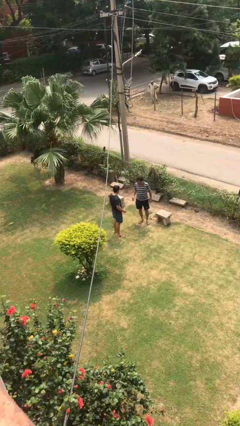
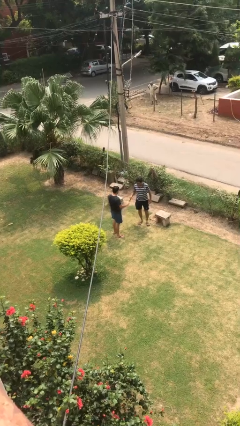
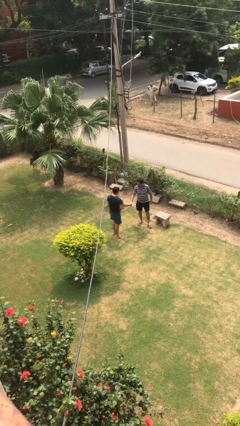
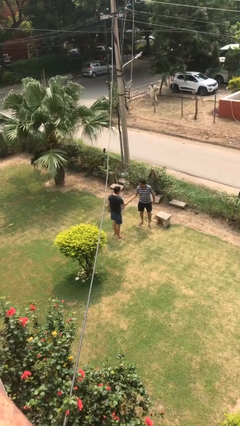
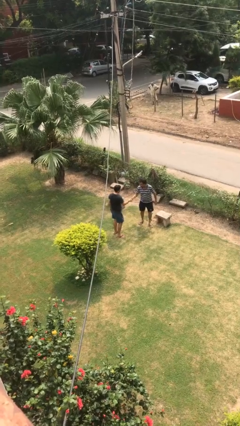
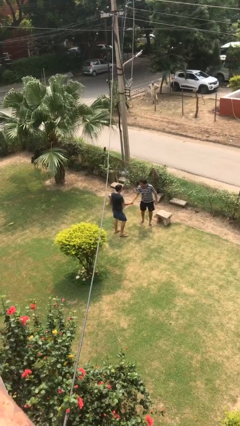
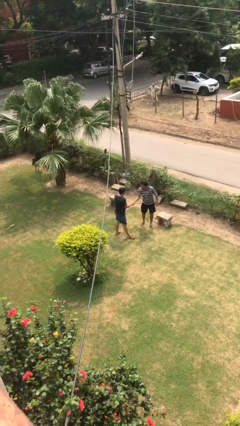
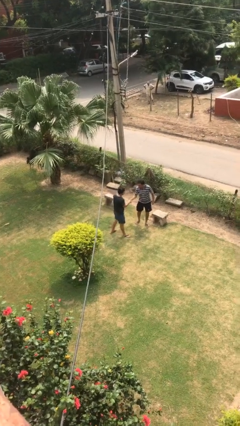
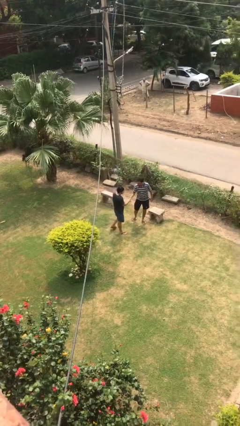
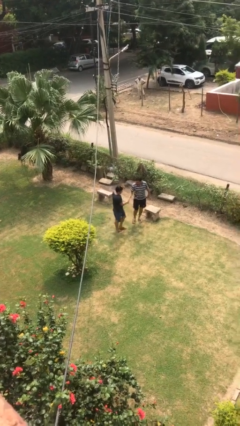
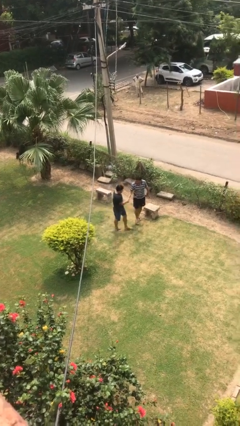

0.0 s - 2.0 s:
person shakes hand

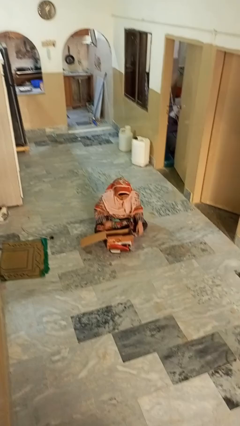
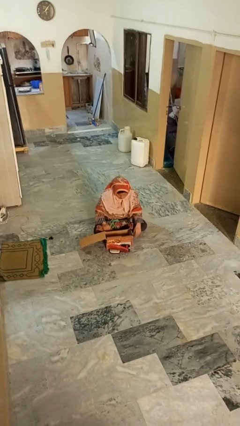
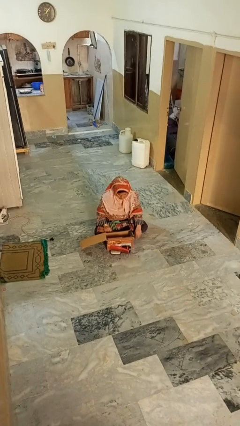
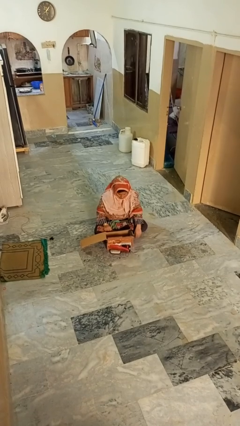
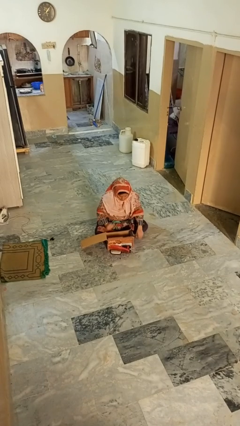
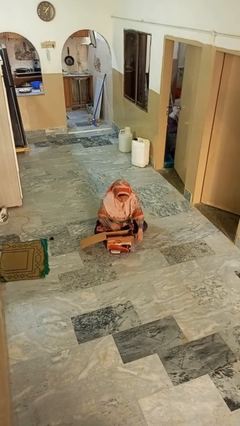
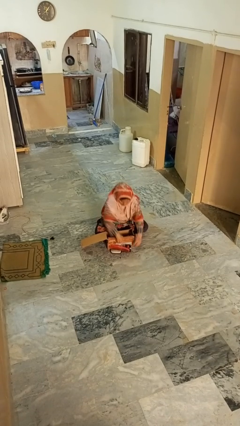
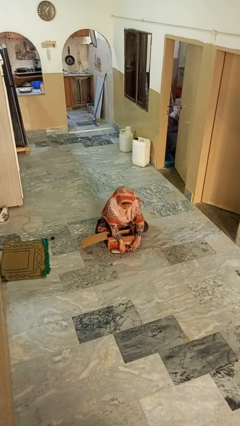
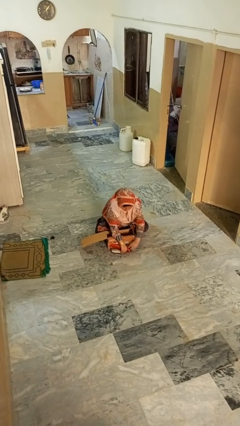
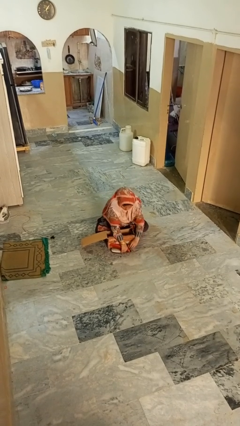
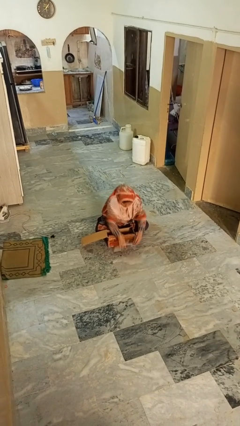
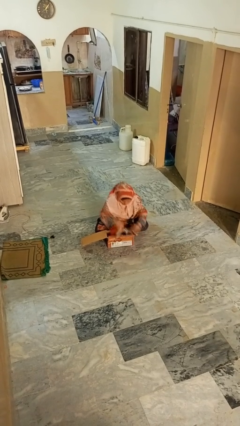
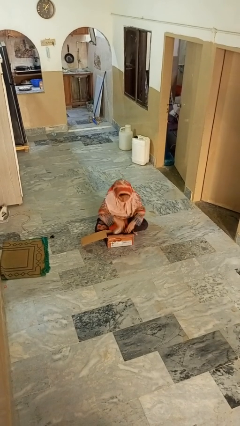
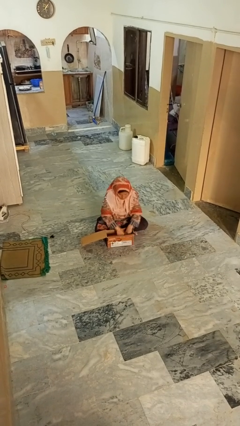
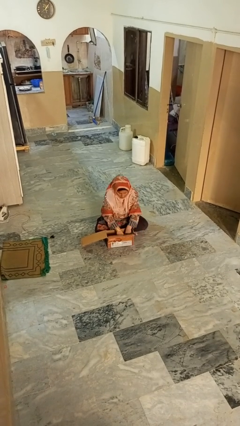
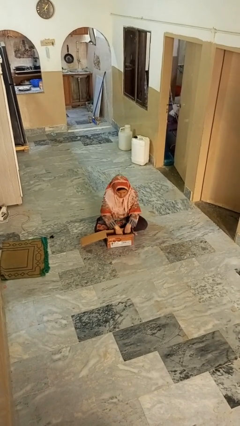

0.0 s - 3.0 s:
person puts object into box

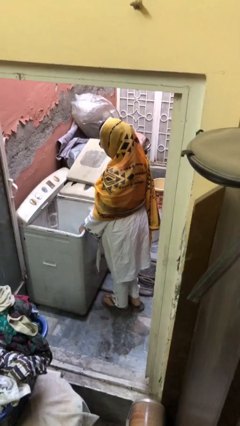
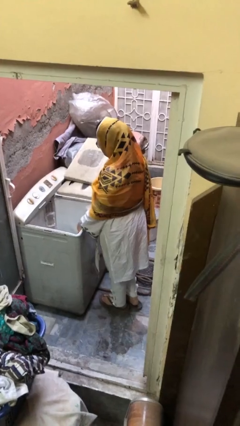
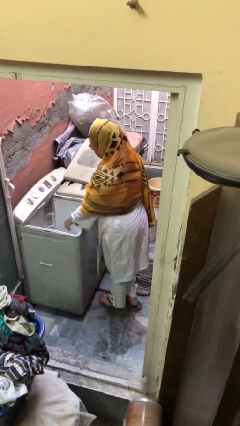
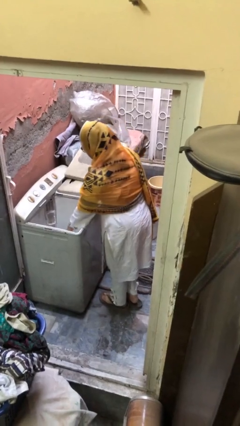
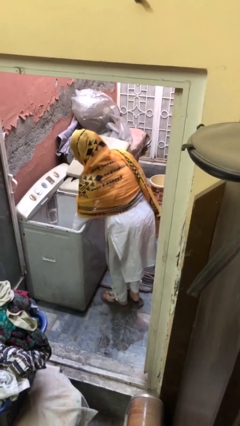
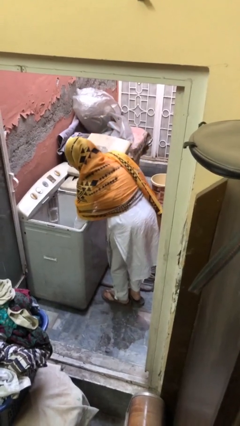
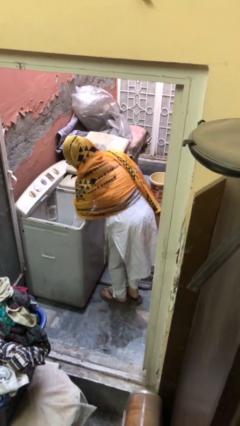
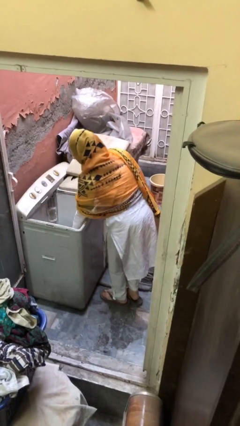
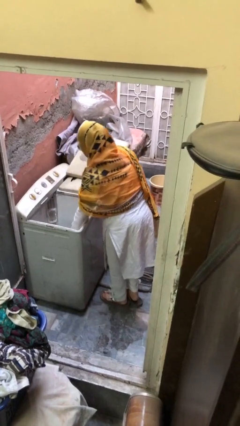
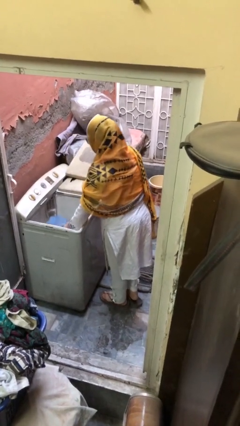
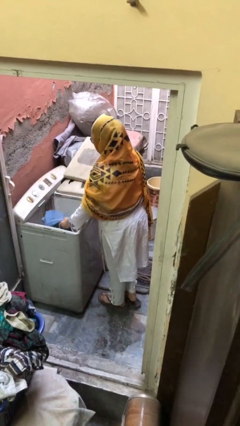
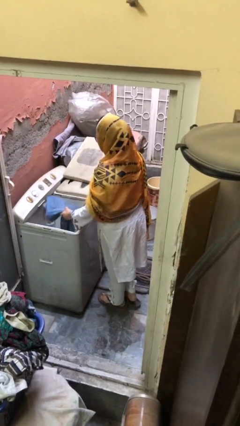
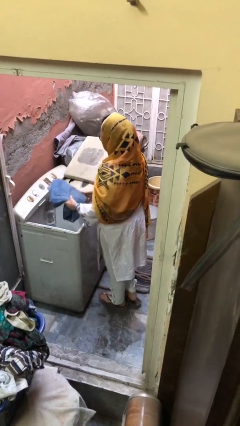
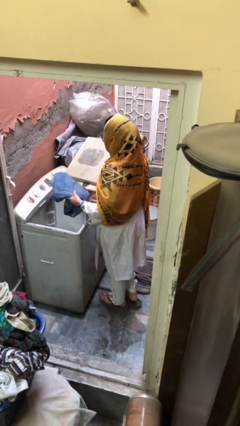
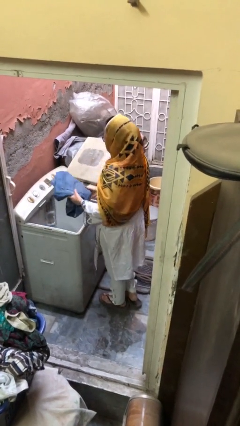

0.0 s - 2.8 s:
person unloads clotheswasher

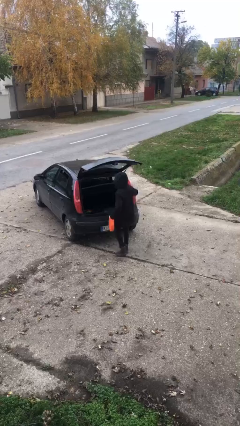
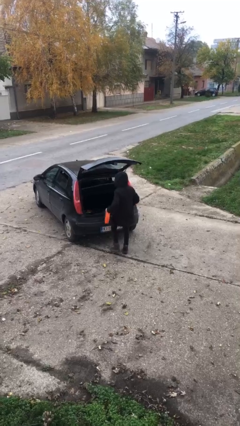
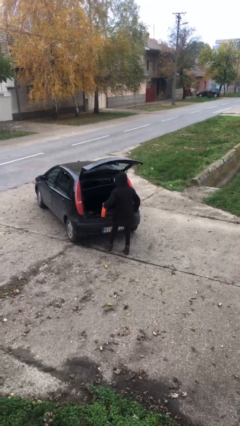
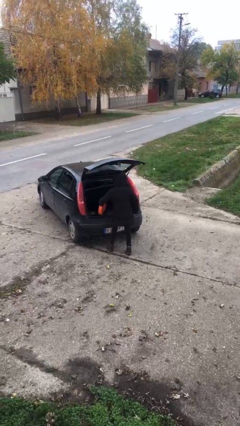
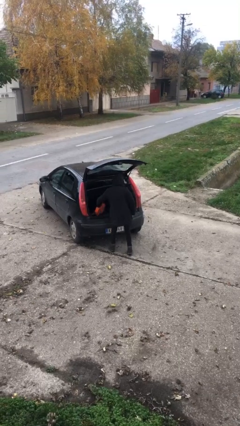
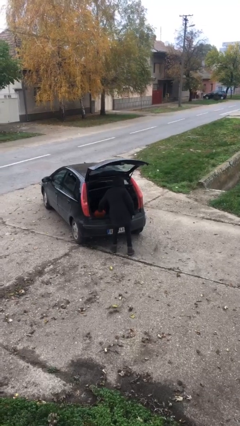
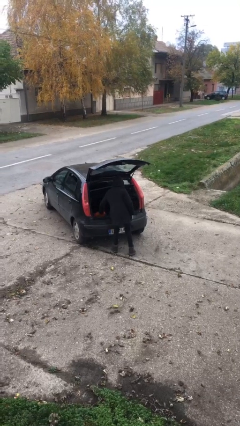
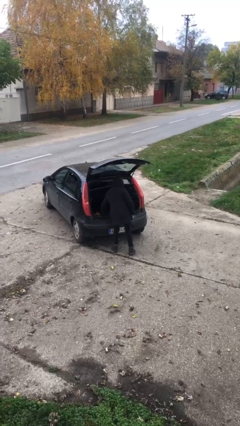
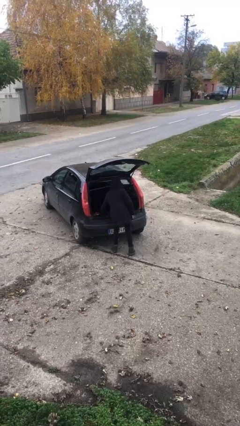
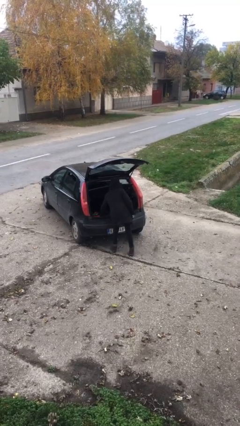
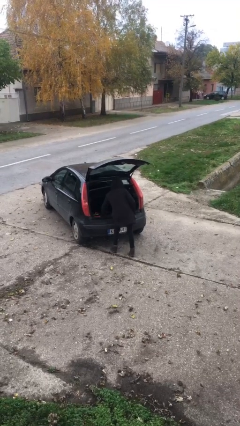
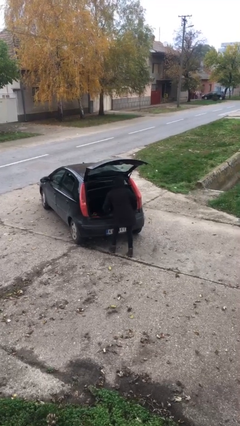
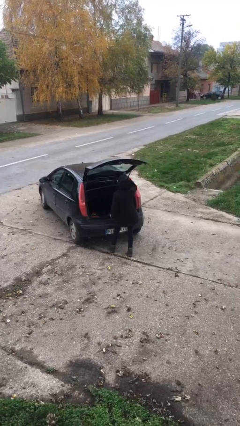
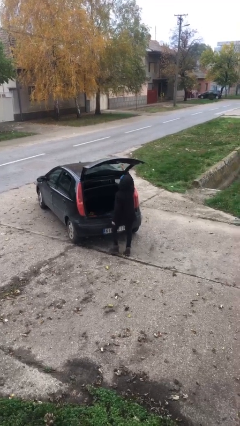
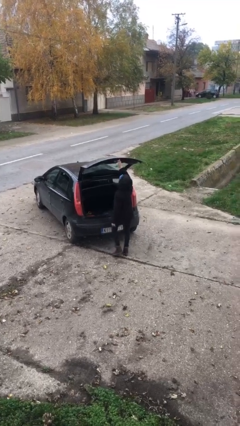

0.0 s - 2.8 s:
person loads car

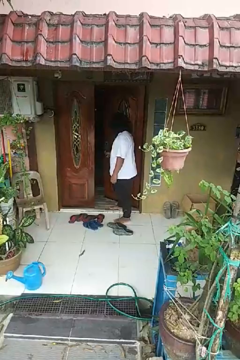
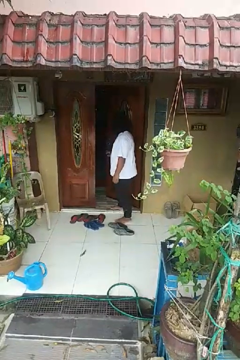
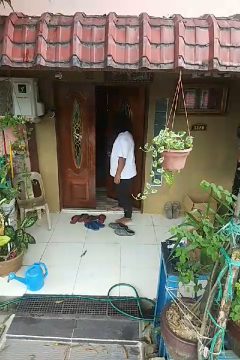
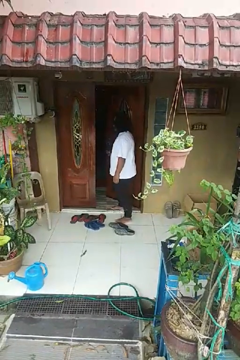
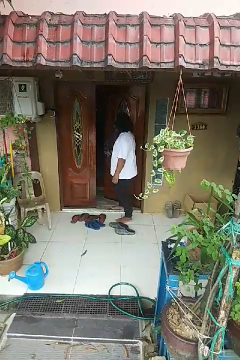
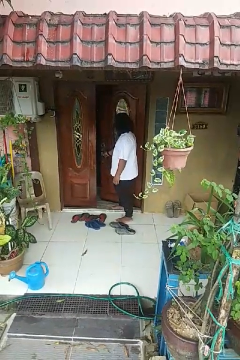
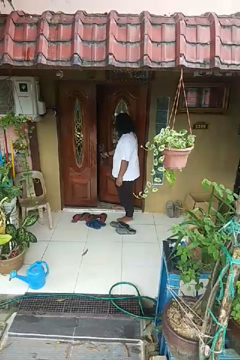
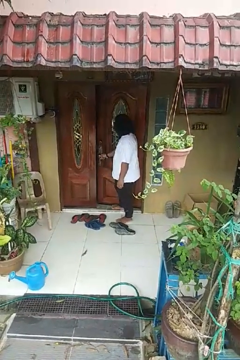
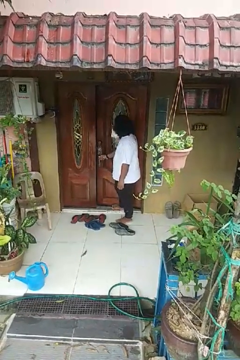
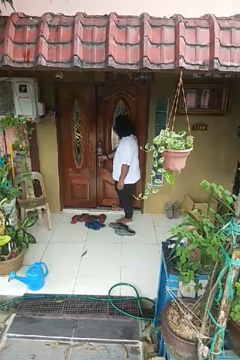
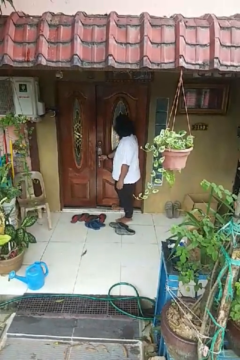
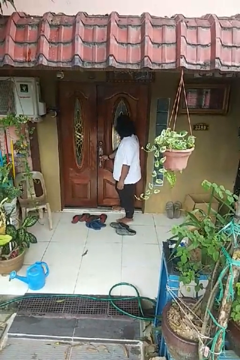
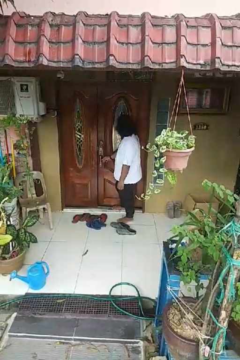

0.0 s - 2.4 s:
person closes door with foot

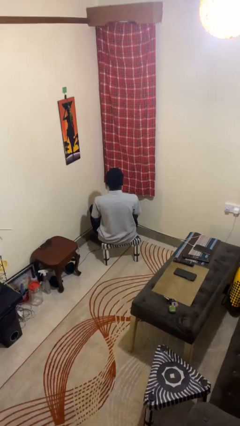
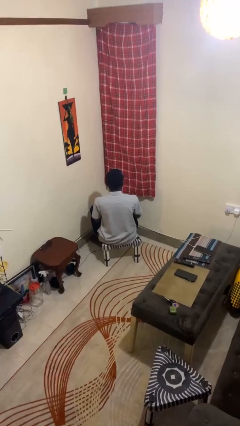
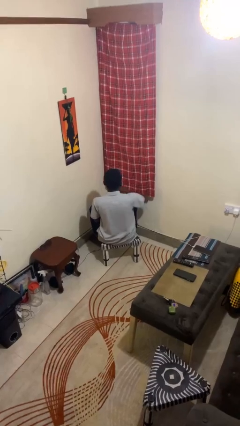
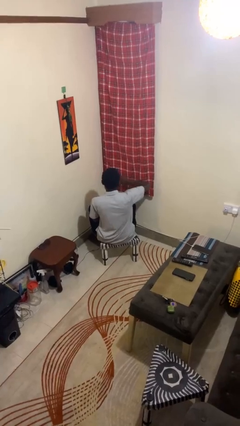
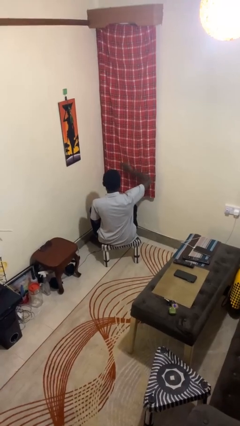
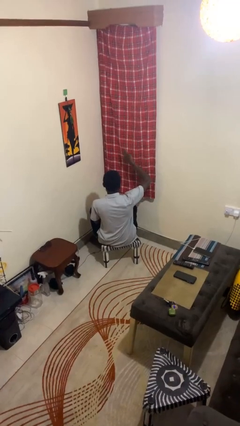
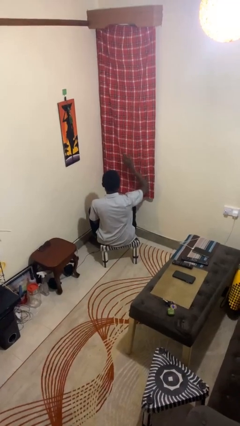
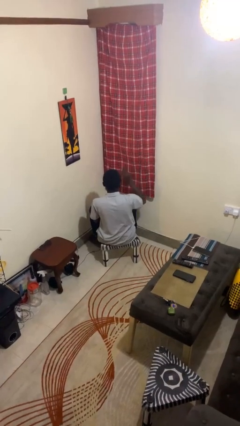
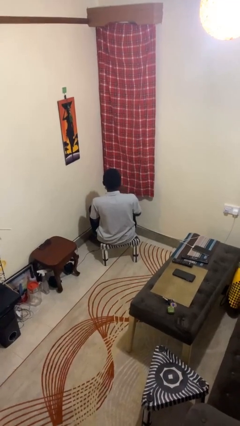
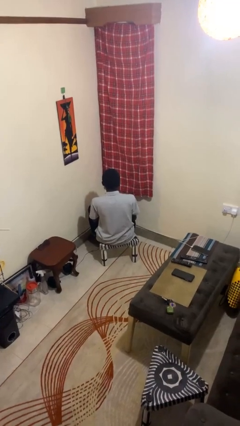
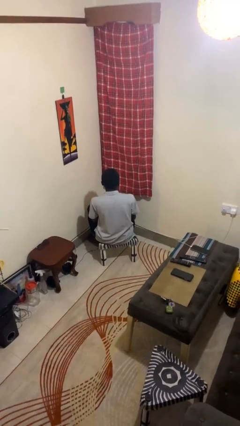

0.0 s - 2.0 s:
person gestures swipe up

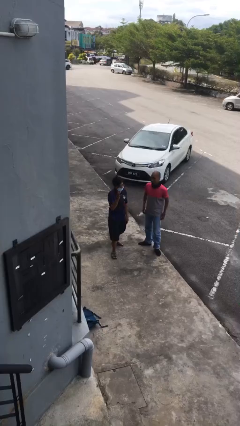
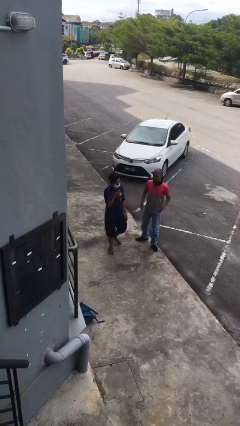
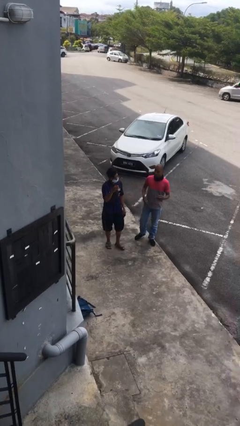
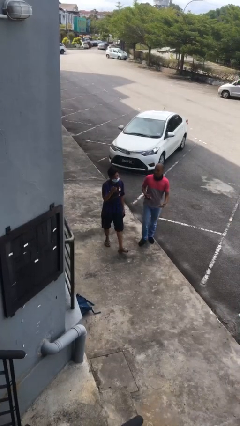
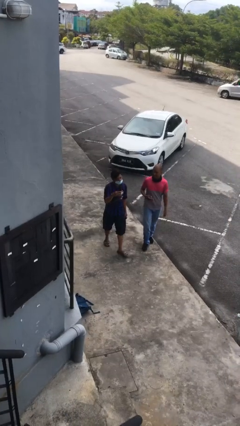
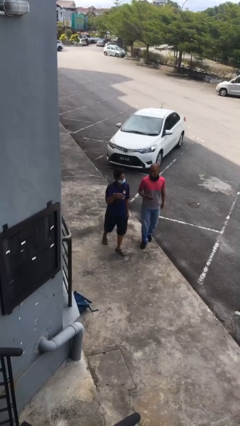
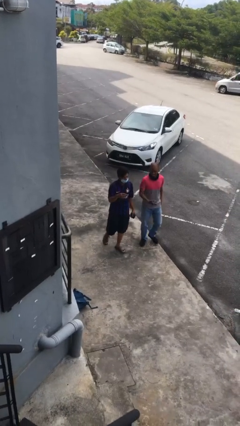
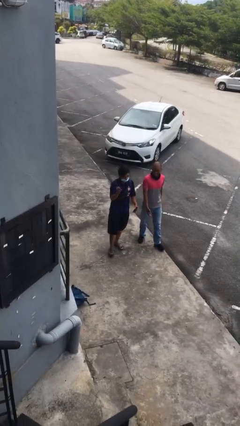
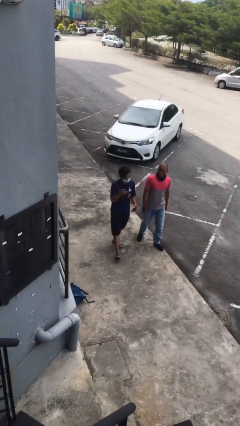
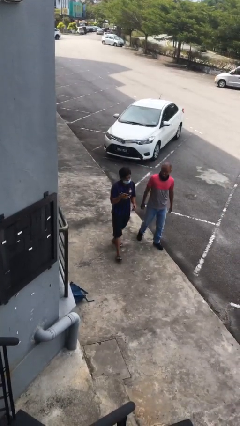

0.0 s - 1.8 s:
person talks to person

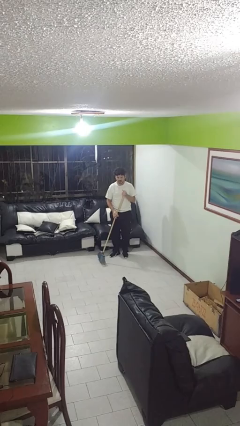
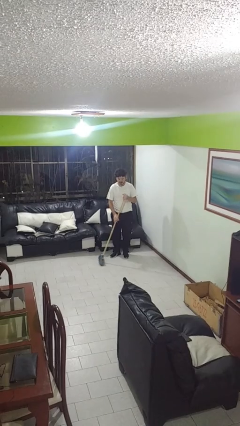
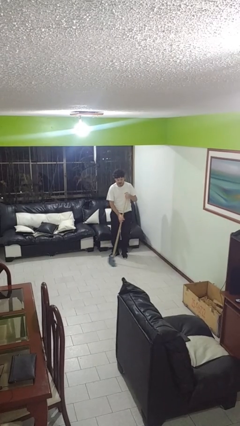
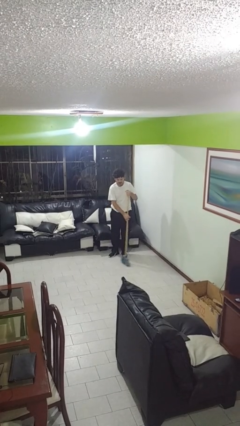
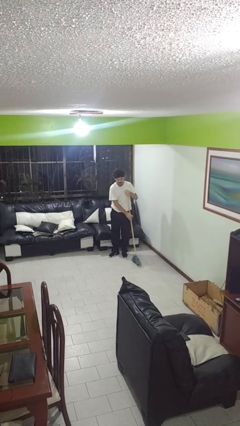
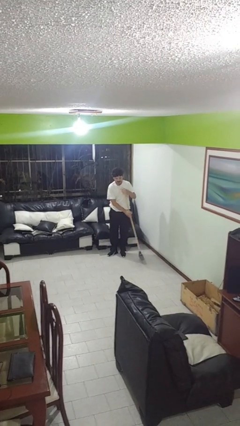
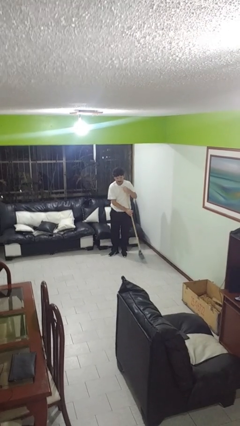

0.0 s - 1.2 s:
person sweeps floor
